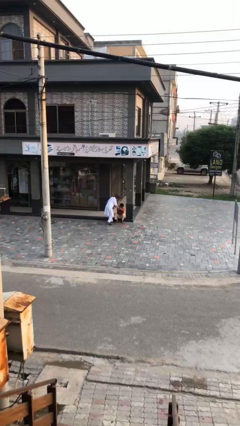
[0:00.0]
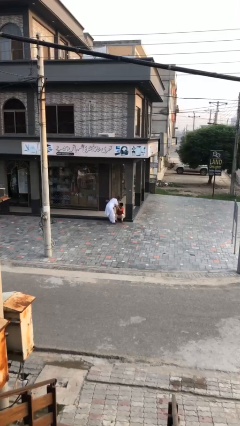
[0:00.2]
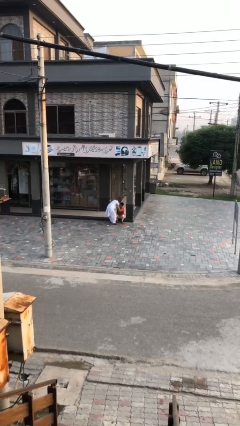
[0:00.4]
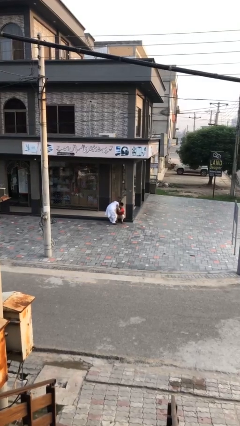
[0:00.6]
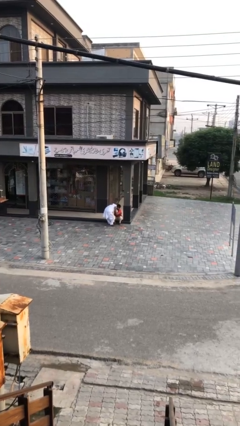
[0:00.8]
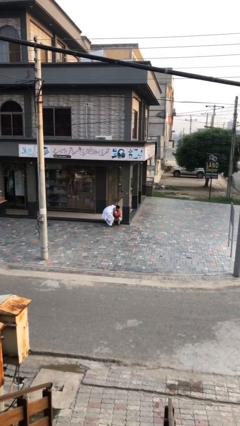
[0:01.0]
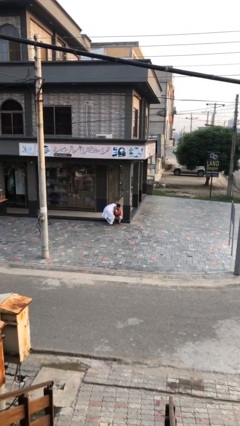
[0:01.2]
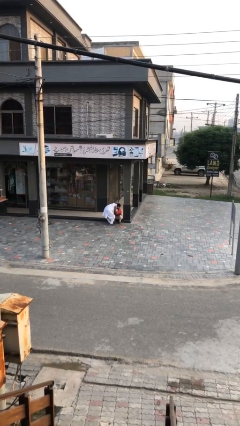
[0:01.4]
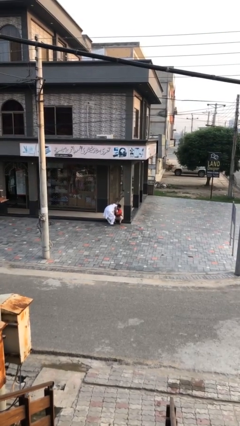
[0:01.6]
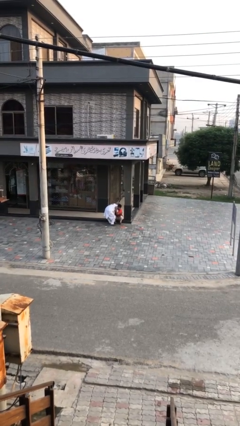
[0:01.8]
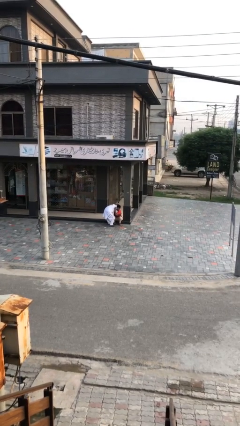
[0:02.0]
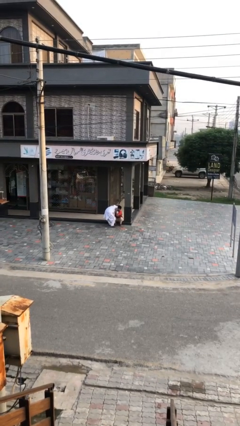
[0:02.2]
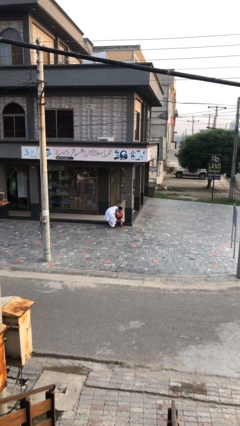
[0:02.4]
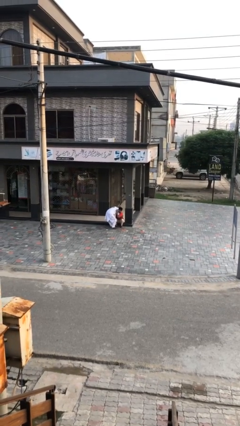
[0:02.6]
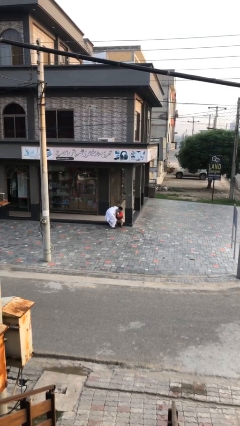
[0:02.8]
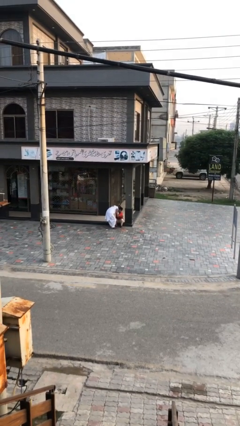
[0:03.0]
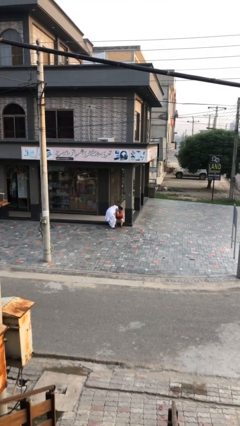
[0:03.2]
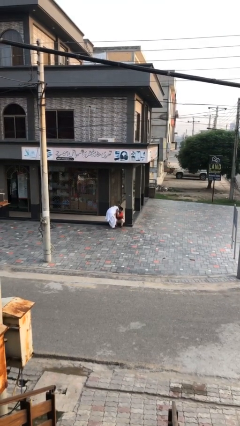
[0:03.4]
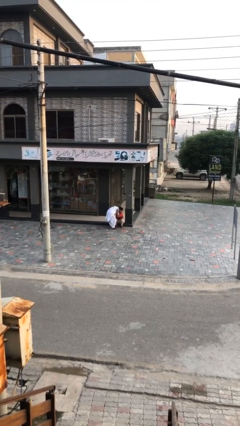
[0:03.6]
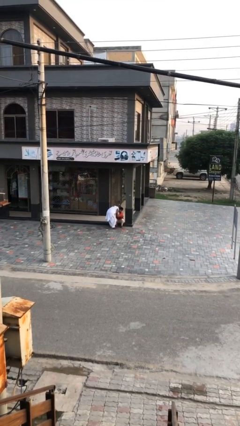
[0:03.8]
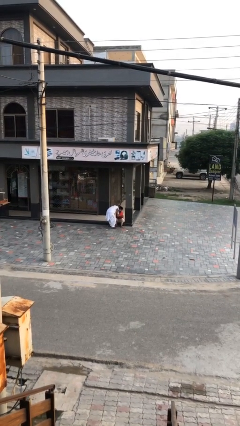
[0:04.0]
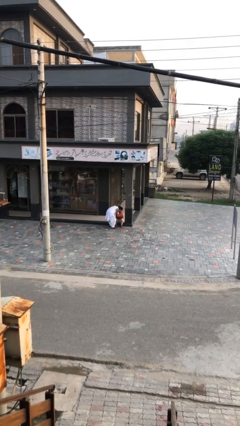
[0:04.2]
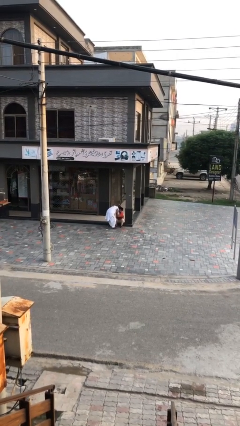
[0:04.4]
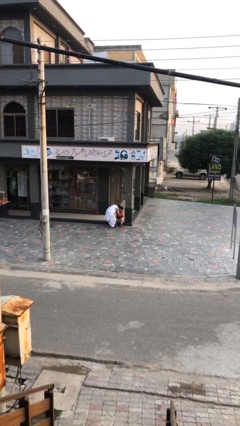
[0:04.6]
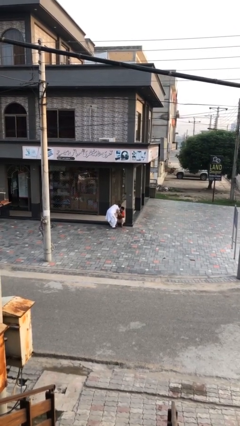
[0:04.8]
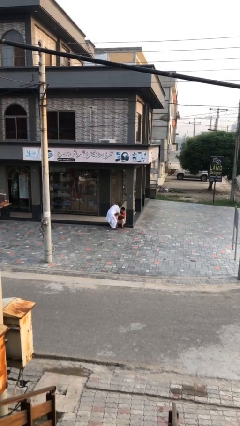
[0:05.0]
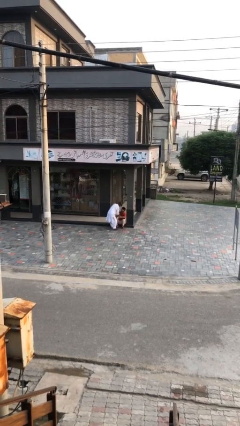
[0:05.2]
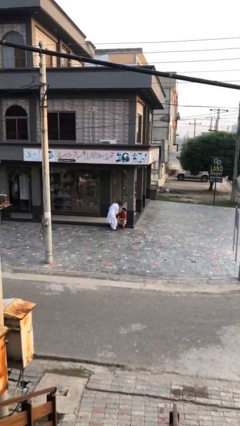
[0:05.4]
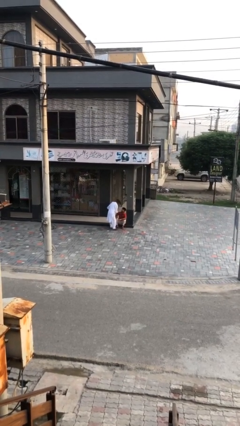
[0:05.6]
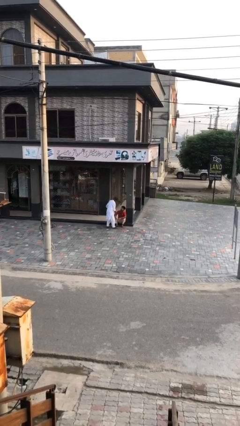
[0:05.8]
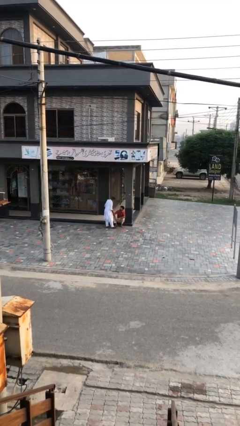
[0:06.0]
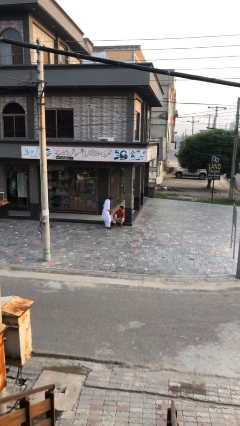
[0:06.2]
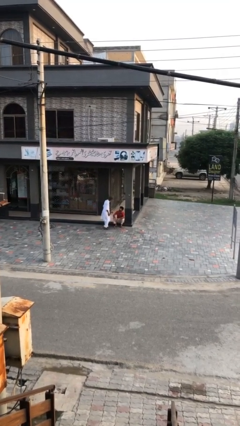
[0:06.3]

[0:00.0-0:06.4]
person embraces person

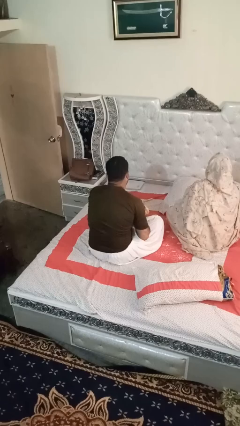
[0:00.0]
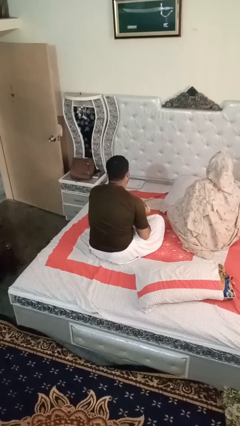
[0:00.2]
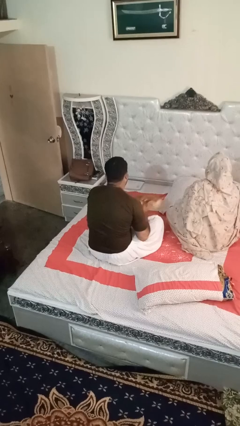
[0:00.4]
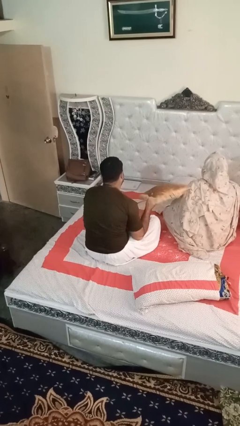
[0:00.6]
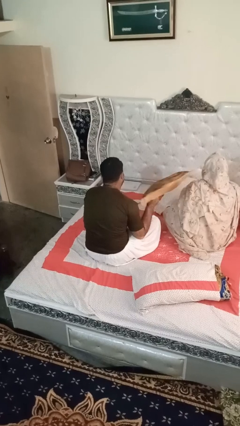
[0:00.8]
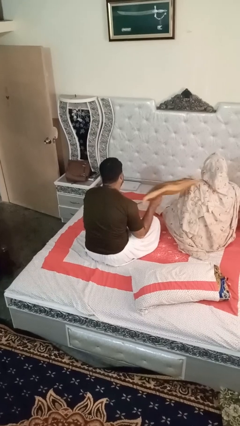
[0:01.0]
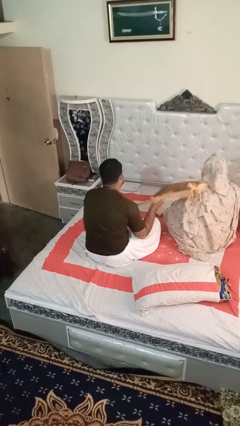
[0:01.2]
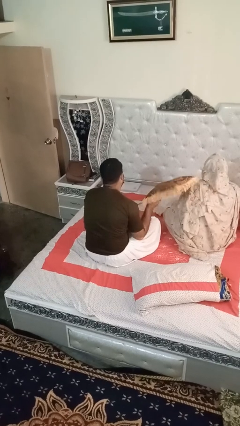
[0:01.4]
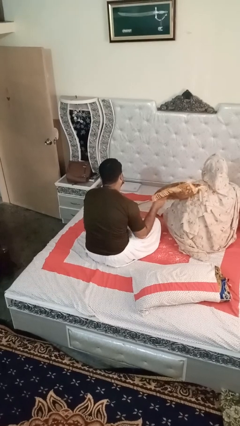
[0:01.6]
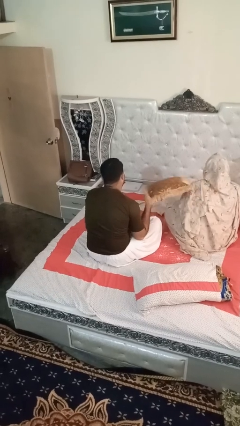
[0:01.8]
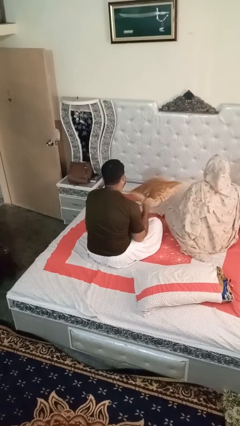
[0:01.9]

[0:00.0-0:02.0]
person hits person with pillow

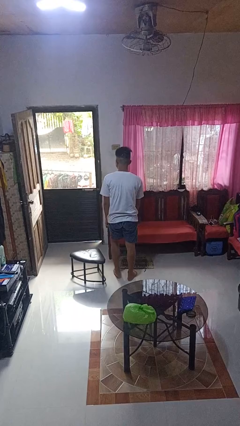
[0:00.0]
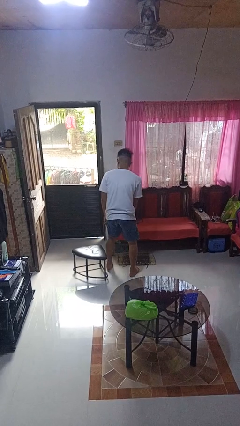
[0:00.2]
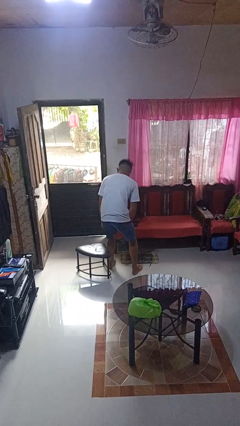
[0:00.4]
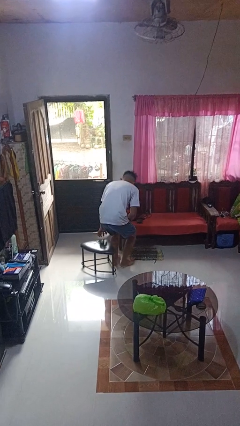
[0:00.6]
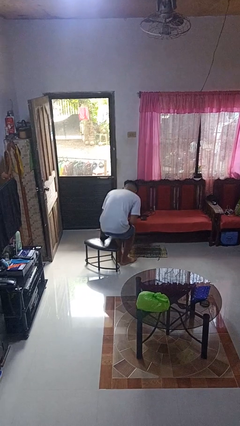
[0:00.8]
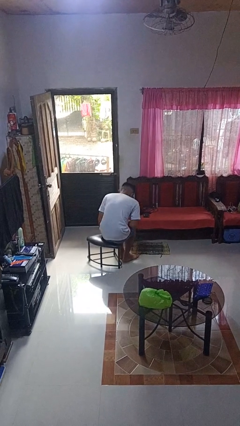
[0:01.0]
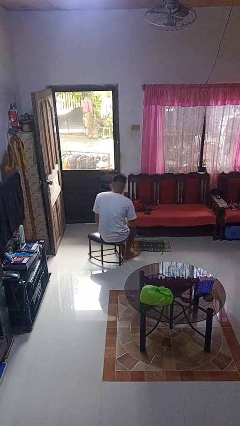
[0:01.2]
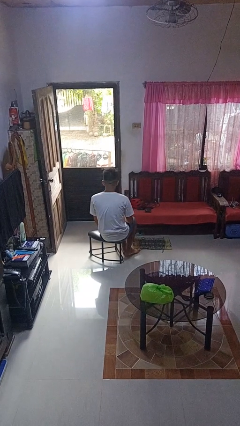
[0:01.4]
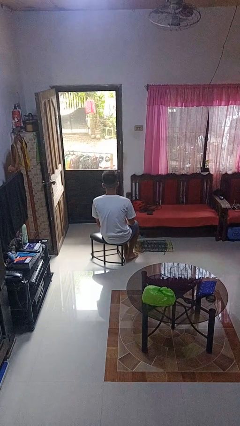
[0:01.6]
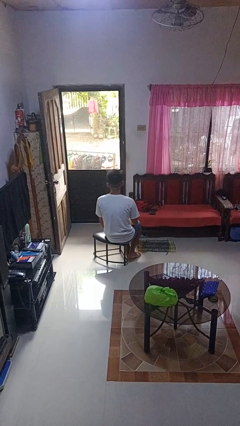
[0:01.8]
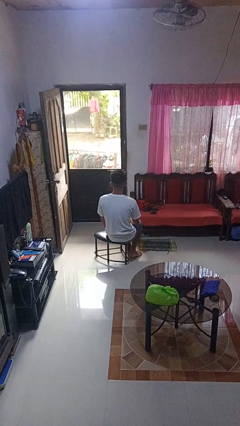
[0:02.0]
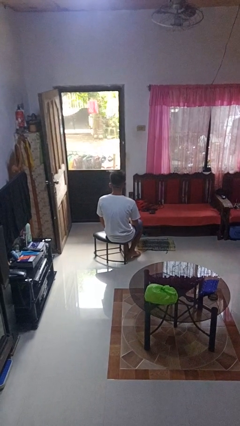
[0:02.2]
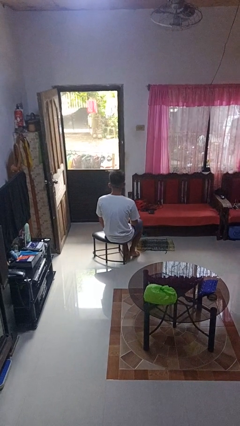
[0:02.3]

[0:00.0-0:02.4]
person sits down

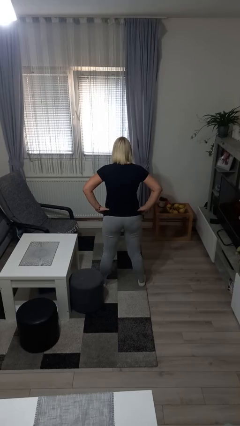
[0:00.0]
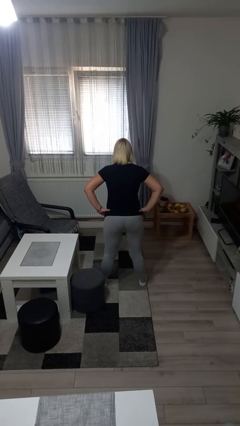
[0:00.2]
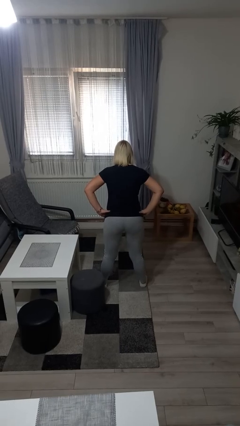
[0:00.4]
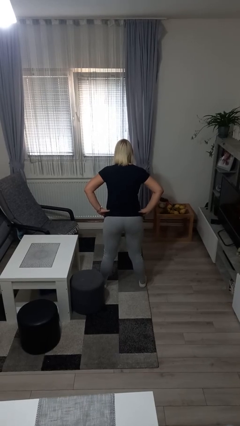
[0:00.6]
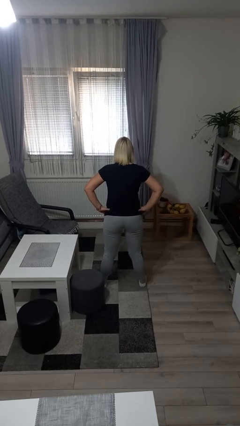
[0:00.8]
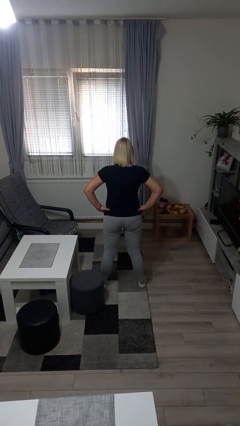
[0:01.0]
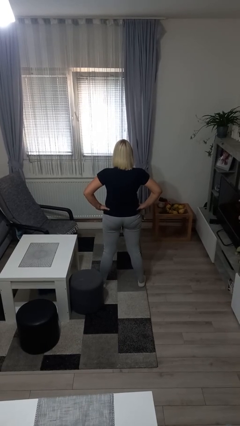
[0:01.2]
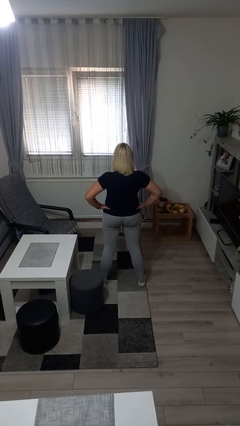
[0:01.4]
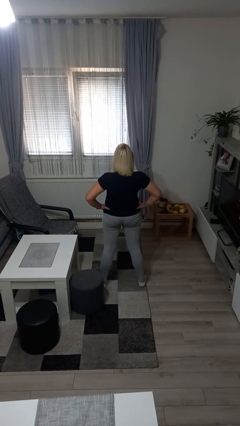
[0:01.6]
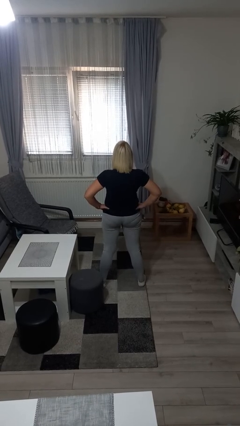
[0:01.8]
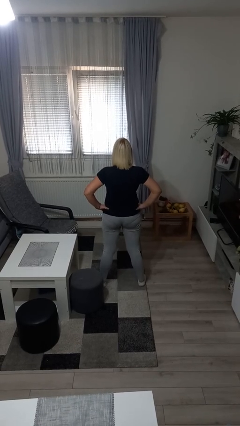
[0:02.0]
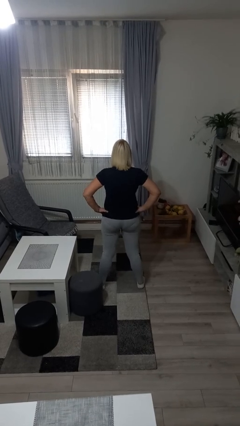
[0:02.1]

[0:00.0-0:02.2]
person wiggles hips

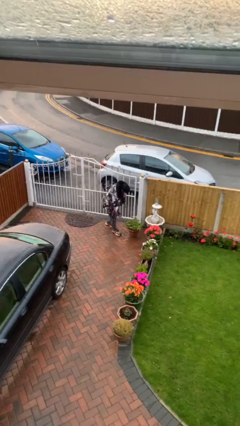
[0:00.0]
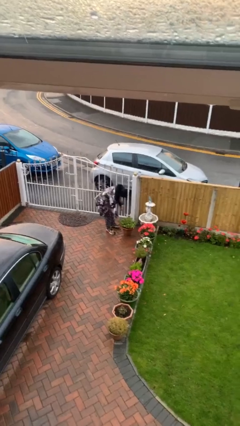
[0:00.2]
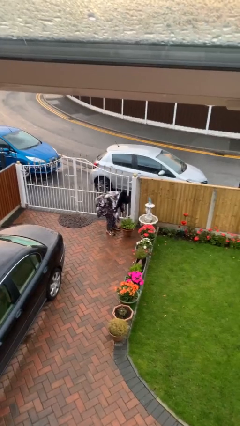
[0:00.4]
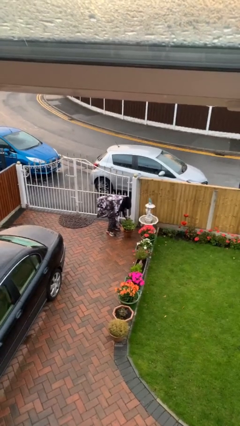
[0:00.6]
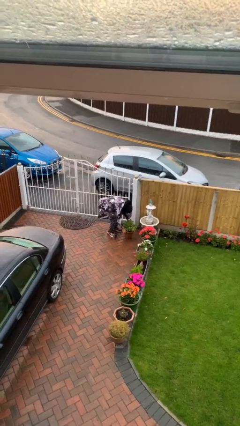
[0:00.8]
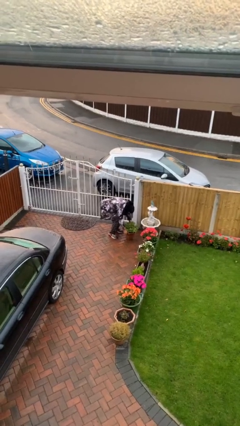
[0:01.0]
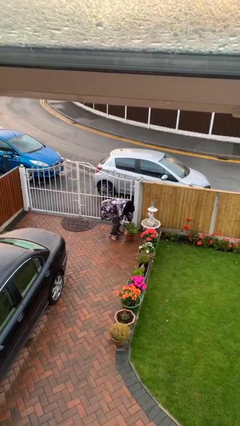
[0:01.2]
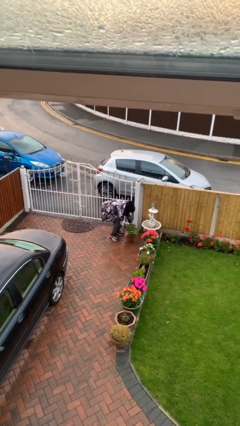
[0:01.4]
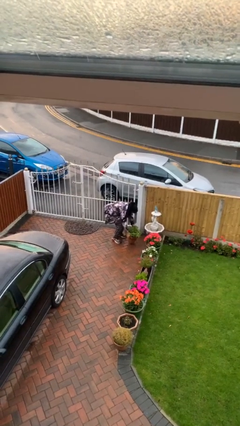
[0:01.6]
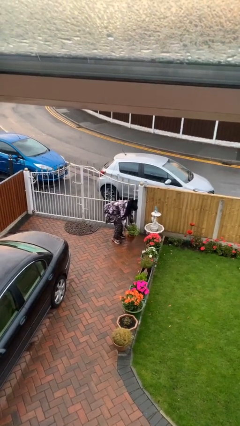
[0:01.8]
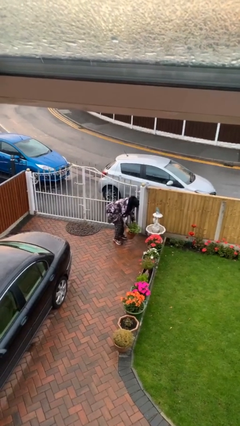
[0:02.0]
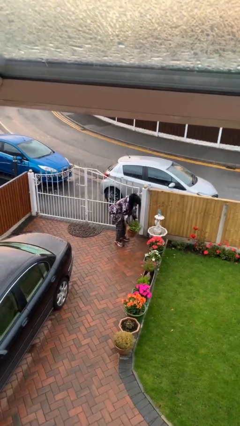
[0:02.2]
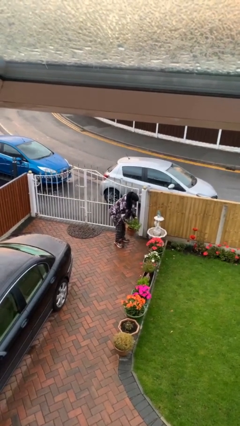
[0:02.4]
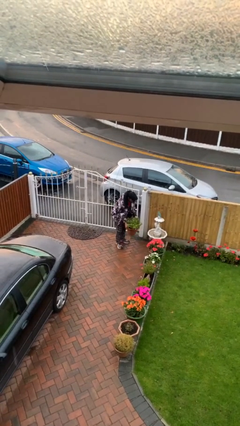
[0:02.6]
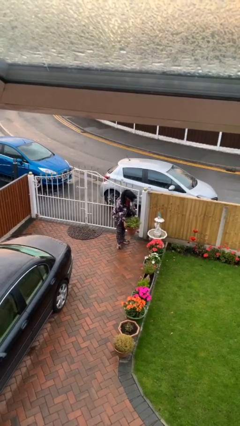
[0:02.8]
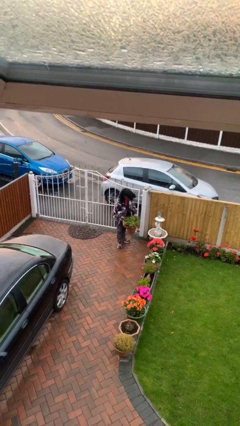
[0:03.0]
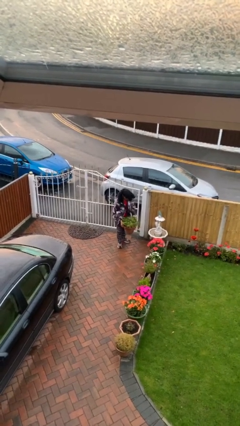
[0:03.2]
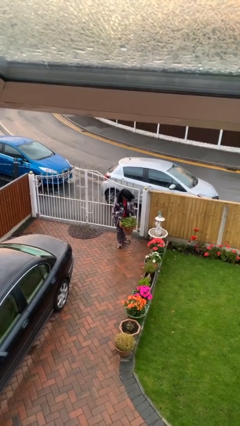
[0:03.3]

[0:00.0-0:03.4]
person picks up object from floor

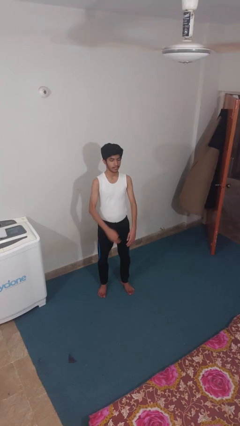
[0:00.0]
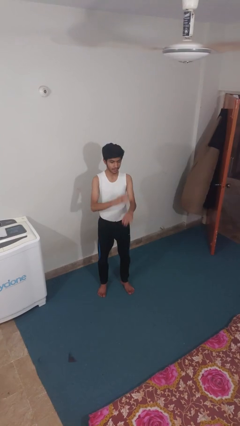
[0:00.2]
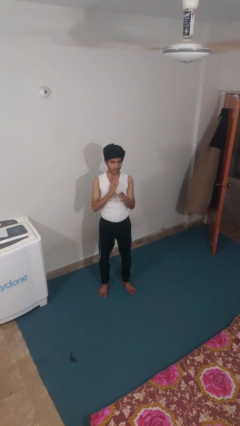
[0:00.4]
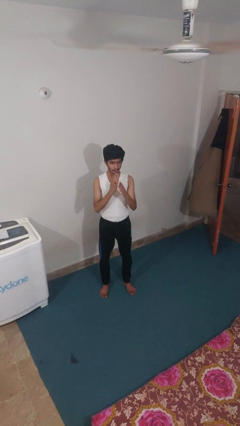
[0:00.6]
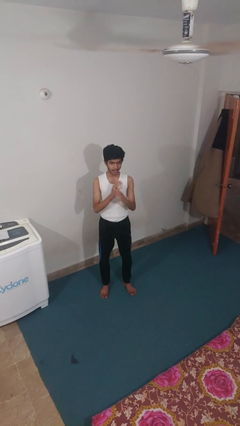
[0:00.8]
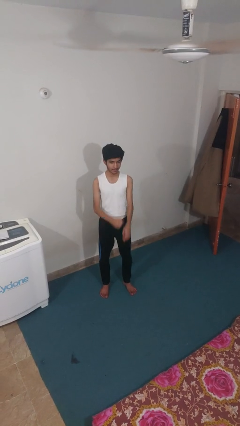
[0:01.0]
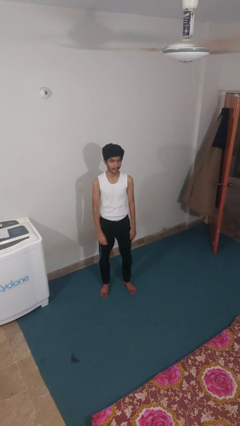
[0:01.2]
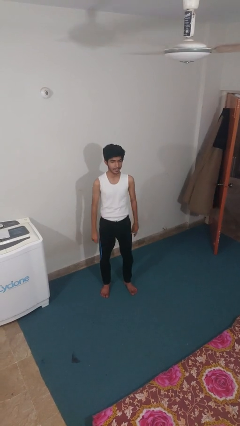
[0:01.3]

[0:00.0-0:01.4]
person karate chop
